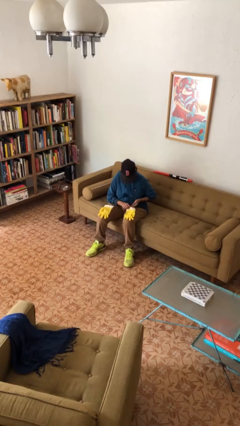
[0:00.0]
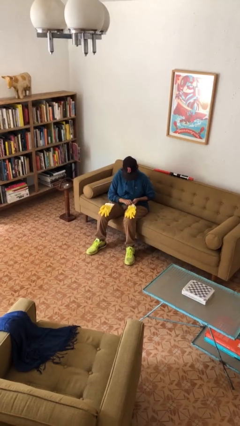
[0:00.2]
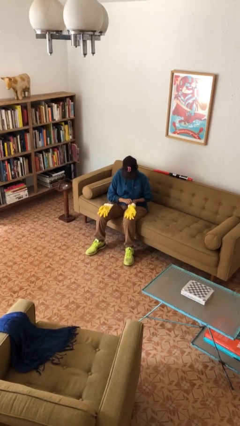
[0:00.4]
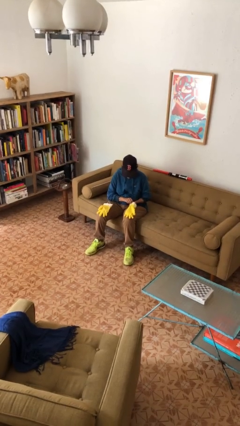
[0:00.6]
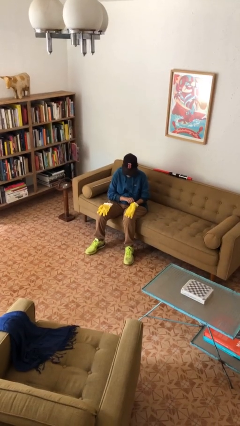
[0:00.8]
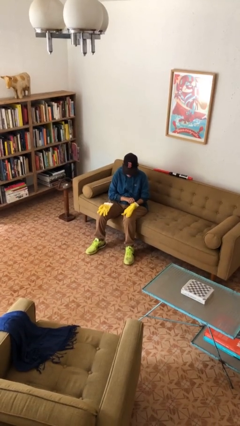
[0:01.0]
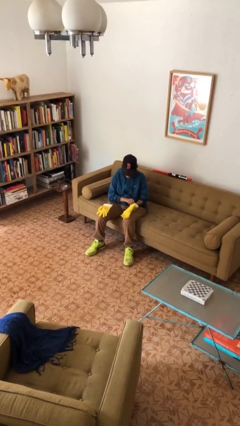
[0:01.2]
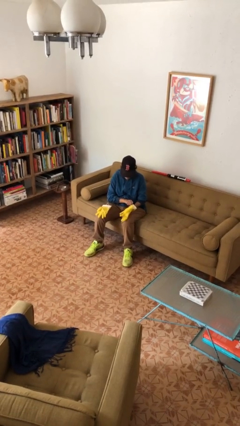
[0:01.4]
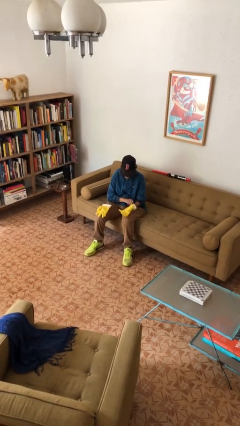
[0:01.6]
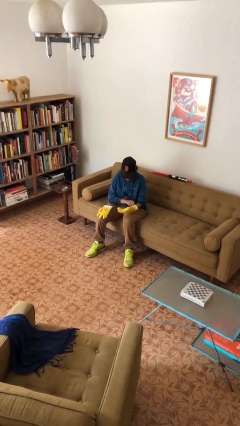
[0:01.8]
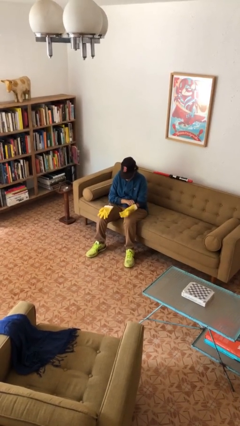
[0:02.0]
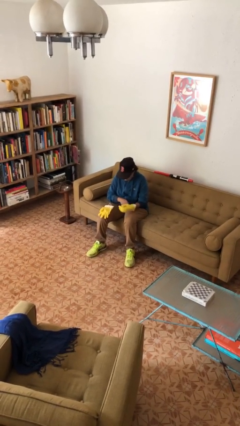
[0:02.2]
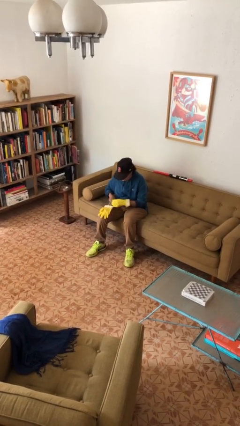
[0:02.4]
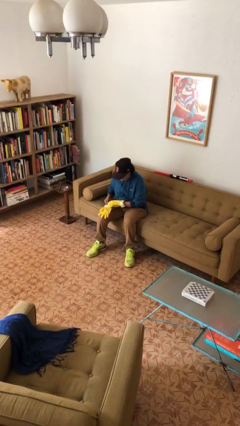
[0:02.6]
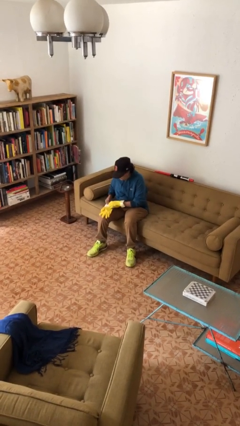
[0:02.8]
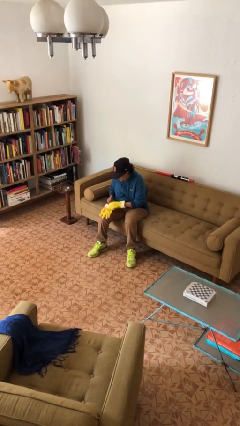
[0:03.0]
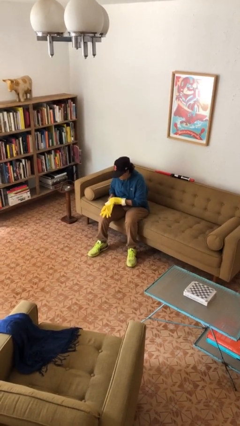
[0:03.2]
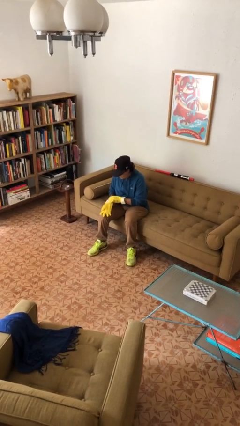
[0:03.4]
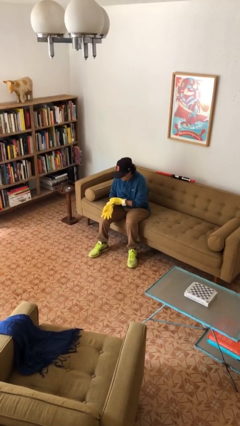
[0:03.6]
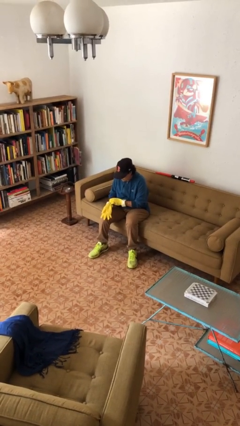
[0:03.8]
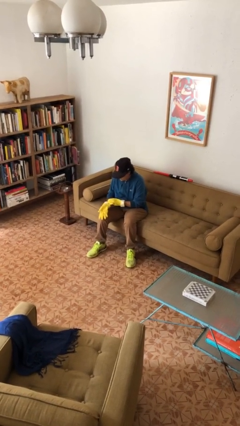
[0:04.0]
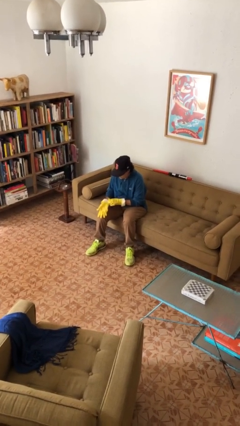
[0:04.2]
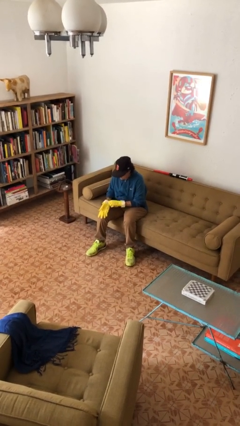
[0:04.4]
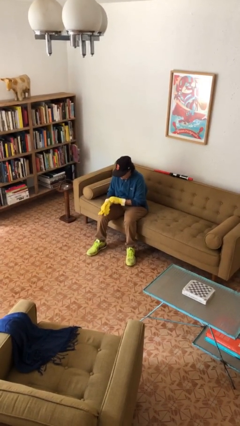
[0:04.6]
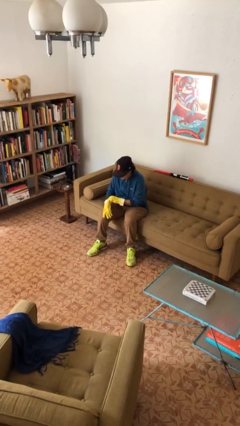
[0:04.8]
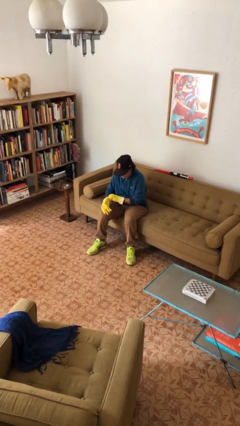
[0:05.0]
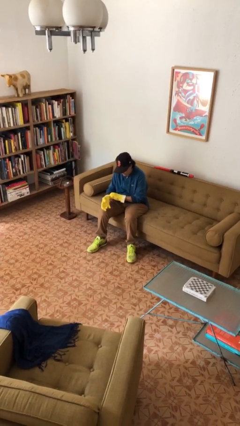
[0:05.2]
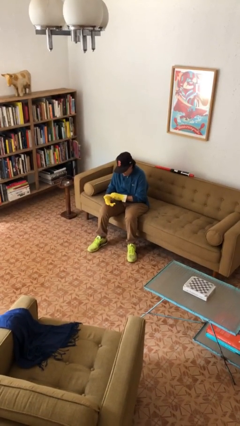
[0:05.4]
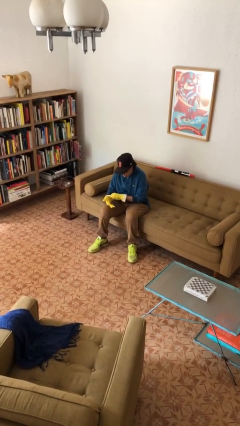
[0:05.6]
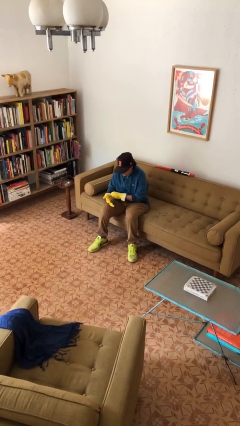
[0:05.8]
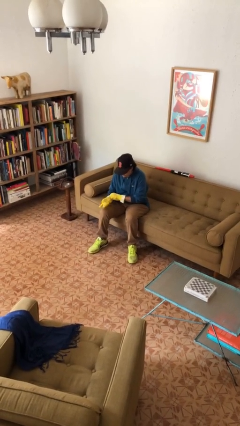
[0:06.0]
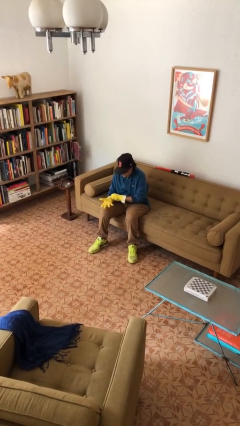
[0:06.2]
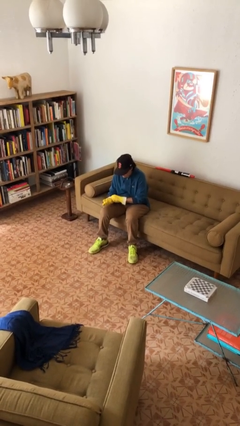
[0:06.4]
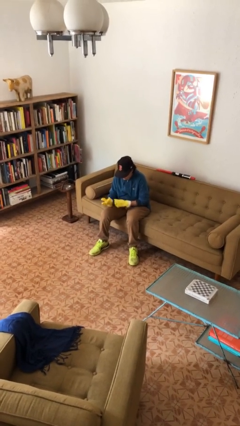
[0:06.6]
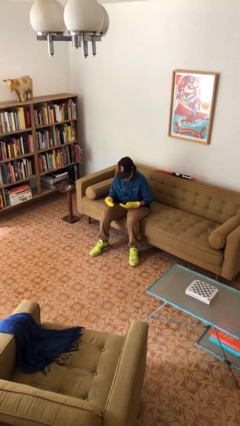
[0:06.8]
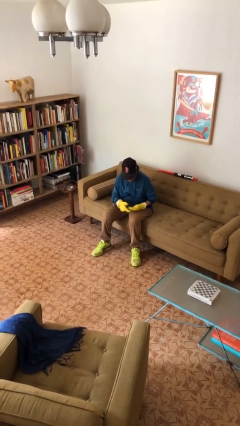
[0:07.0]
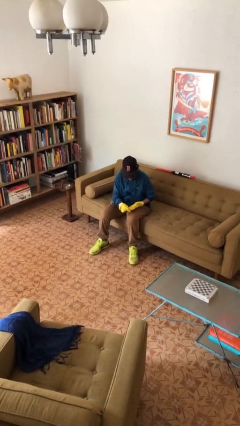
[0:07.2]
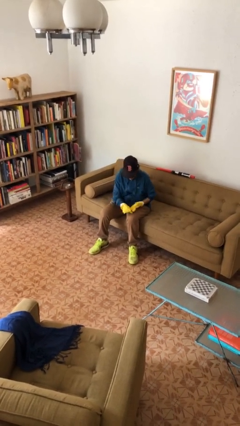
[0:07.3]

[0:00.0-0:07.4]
person puts on gloves

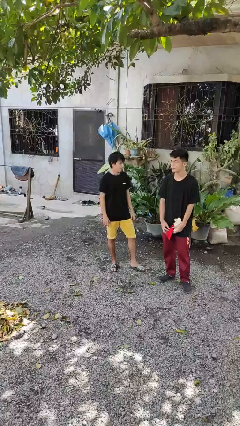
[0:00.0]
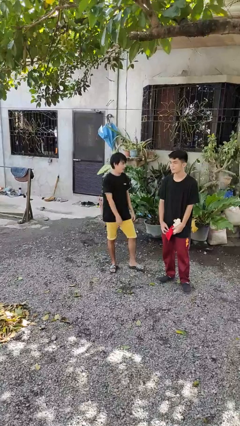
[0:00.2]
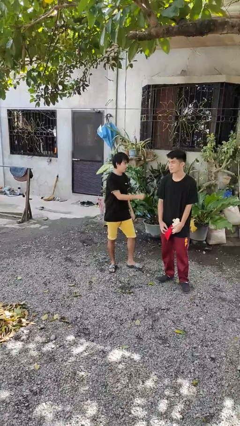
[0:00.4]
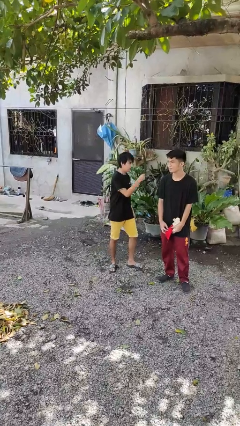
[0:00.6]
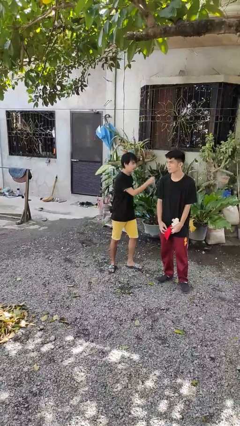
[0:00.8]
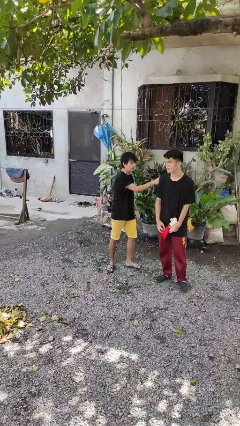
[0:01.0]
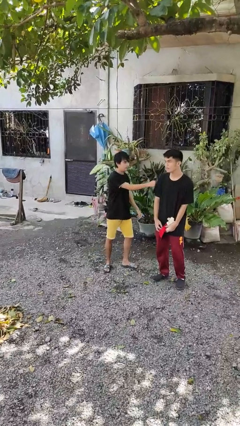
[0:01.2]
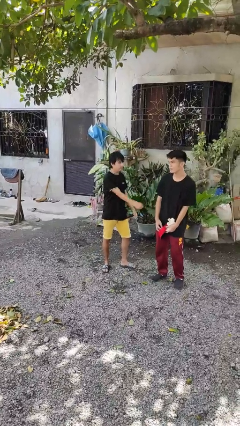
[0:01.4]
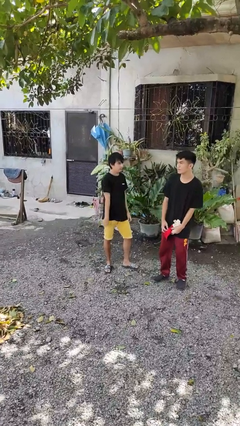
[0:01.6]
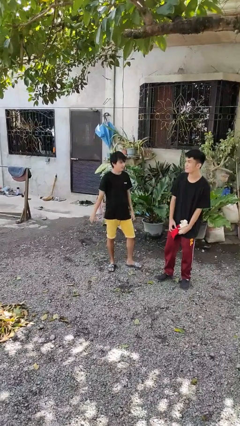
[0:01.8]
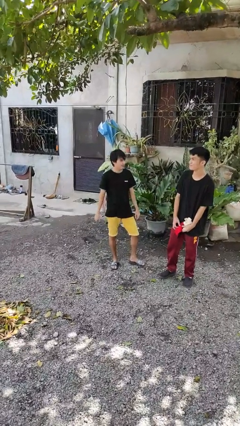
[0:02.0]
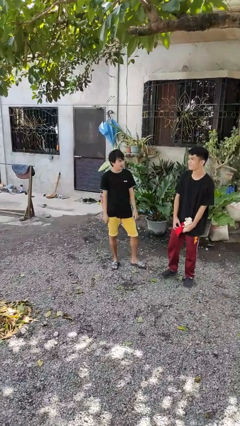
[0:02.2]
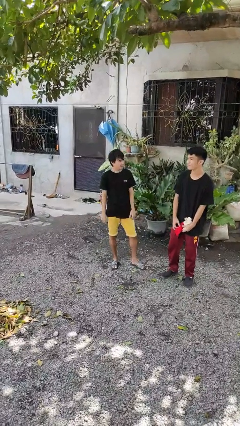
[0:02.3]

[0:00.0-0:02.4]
person pounds shoulders of person

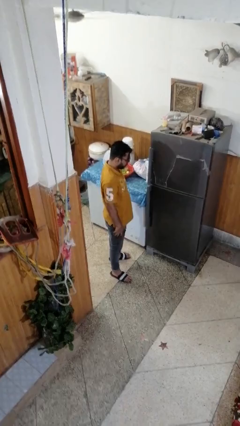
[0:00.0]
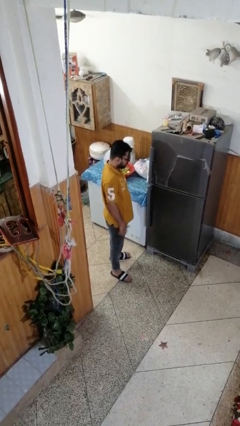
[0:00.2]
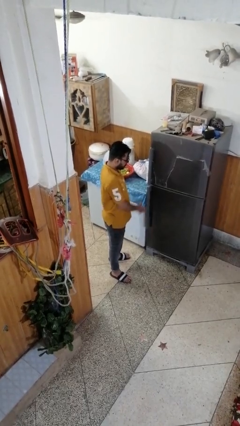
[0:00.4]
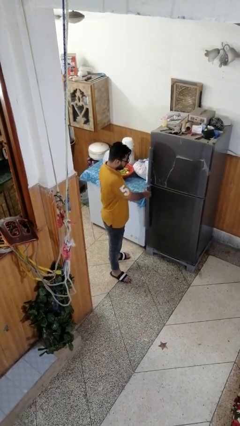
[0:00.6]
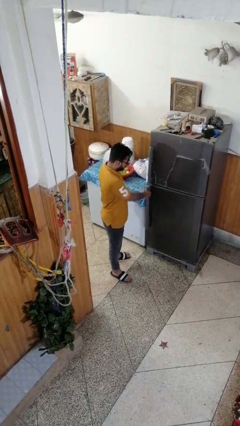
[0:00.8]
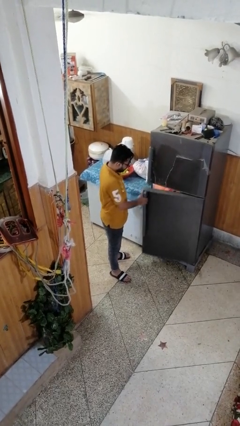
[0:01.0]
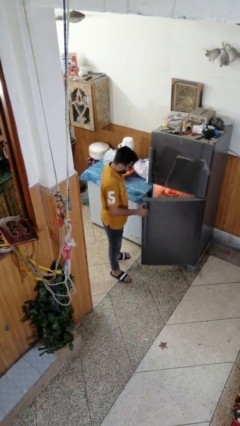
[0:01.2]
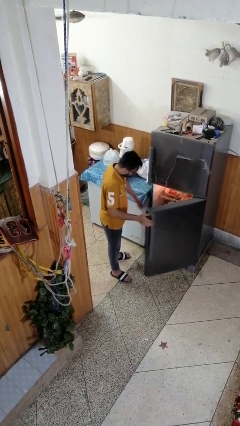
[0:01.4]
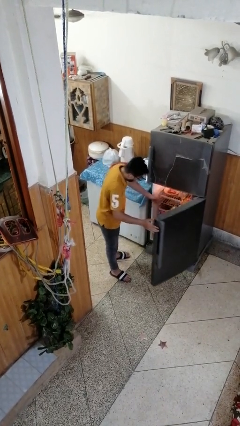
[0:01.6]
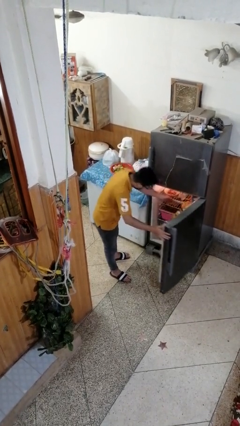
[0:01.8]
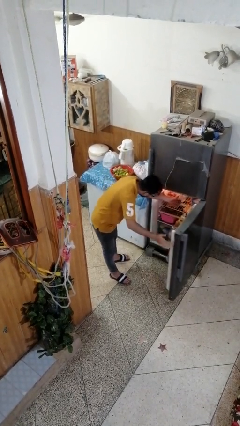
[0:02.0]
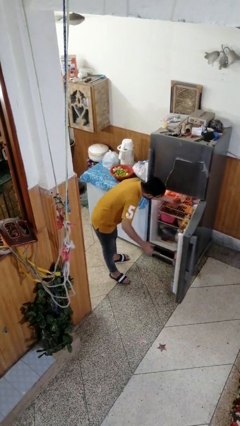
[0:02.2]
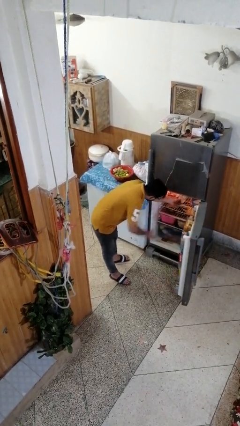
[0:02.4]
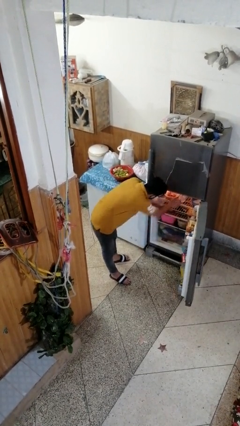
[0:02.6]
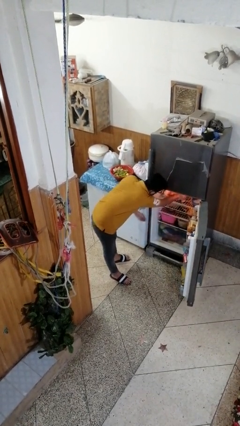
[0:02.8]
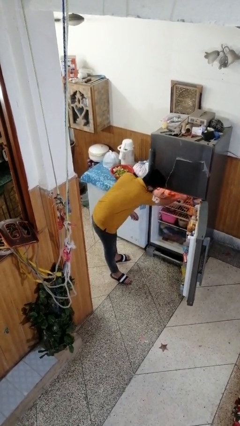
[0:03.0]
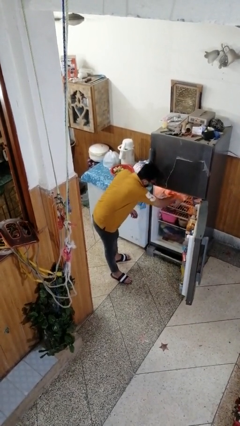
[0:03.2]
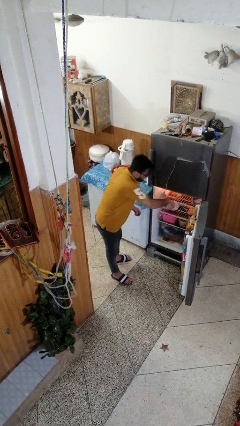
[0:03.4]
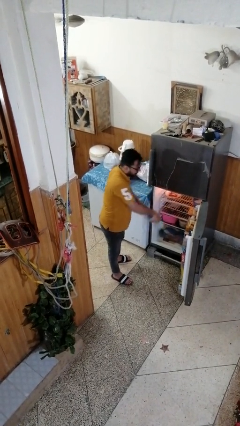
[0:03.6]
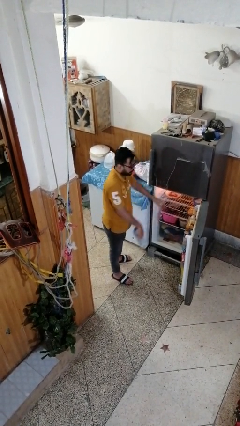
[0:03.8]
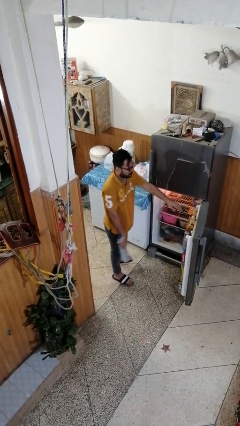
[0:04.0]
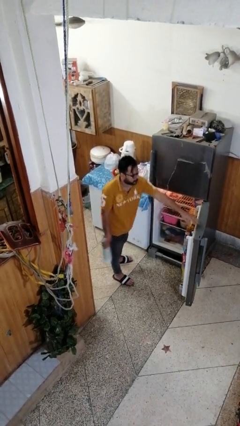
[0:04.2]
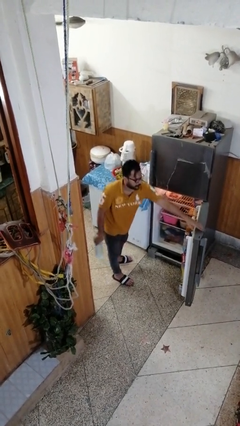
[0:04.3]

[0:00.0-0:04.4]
person takes object from refrigerator

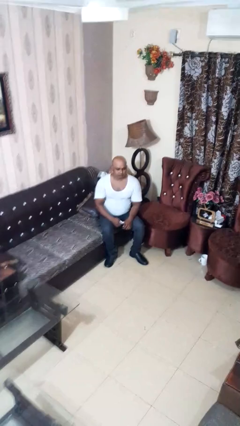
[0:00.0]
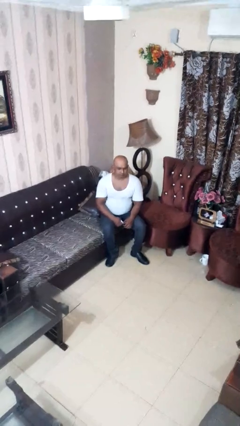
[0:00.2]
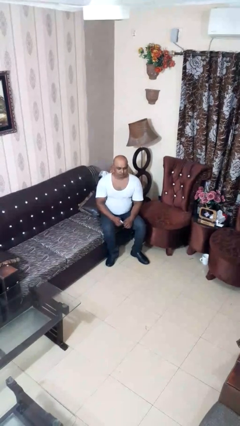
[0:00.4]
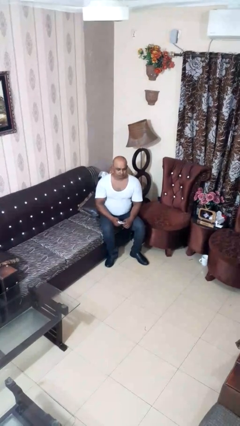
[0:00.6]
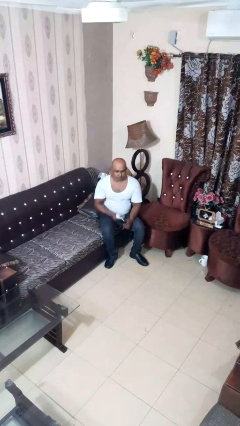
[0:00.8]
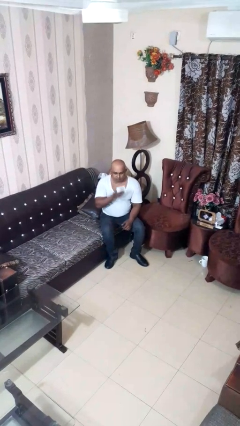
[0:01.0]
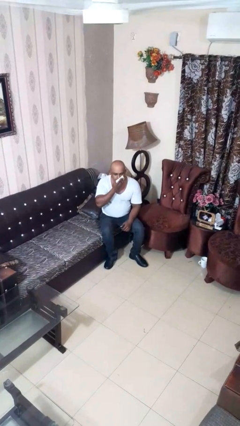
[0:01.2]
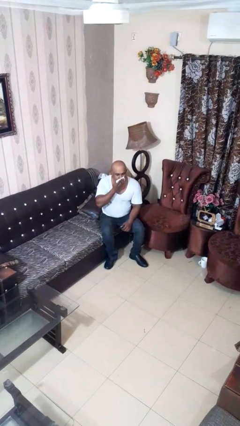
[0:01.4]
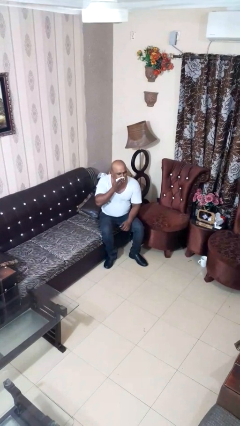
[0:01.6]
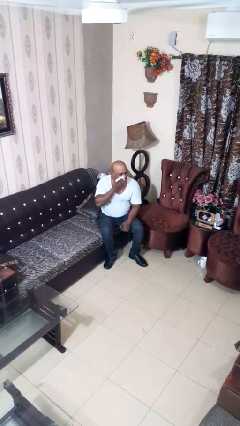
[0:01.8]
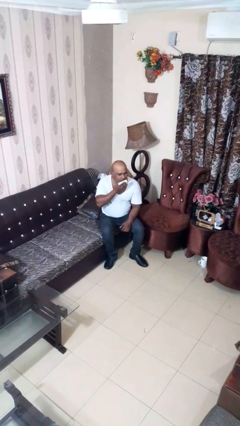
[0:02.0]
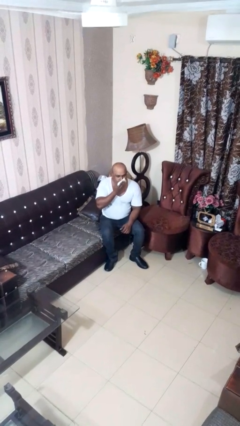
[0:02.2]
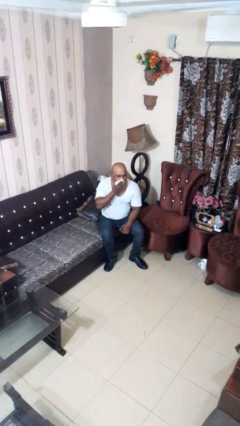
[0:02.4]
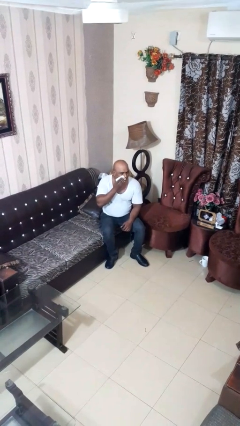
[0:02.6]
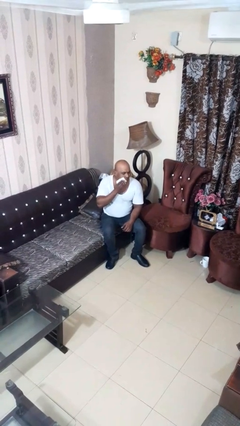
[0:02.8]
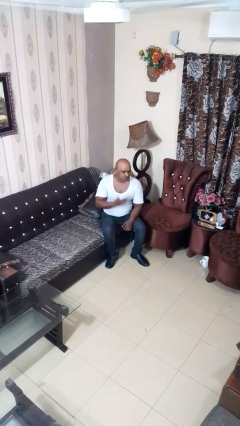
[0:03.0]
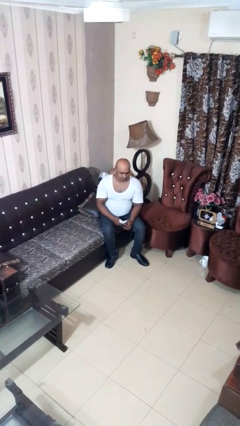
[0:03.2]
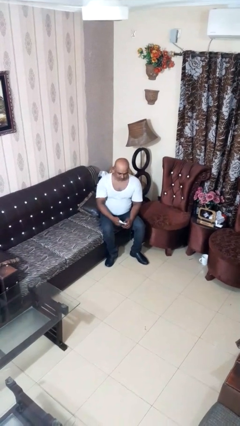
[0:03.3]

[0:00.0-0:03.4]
person wipes mouth with napkin

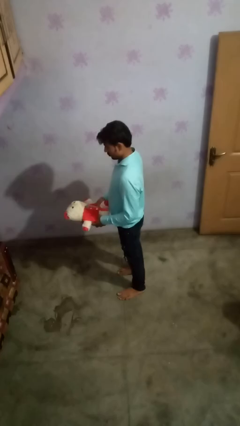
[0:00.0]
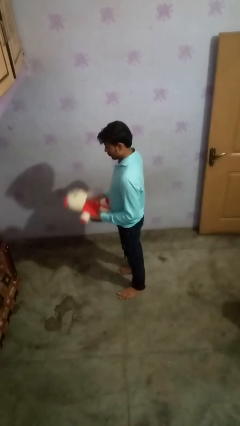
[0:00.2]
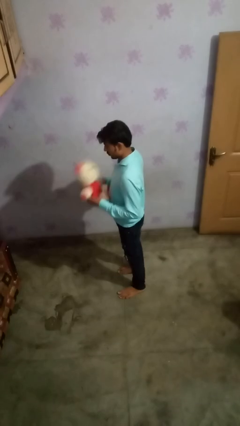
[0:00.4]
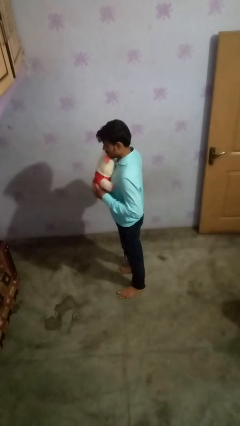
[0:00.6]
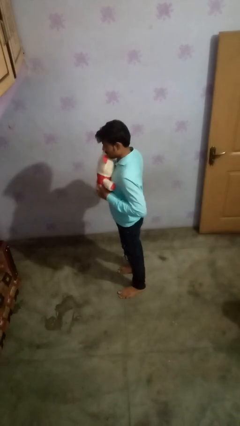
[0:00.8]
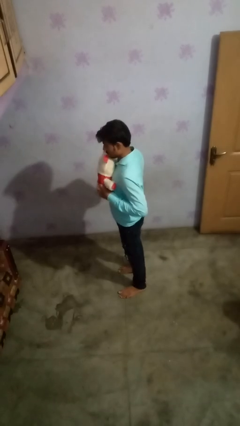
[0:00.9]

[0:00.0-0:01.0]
person hugs stuffed animal
